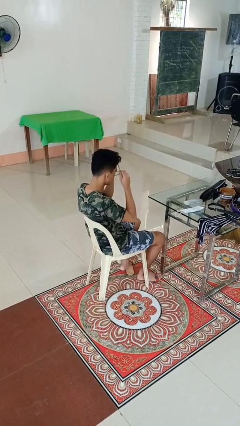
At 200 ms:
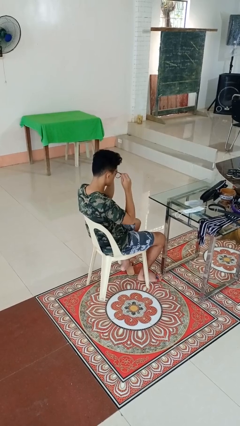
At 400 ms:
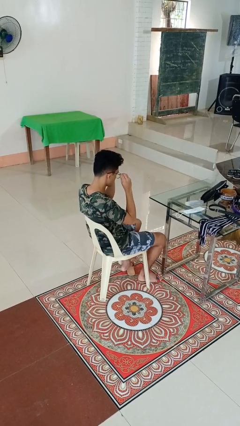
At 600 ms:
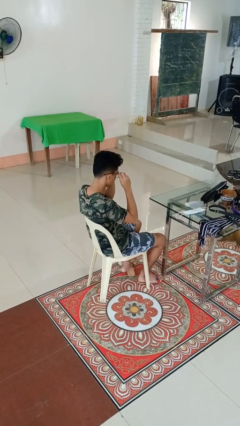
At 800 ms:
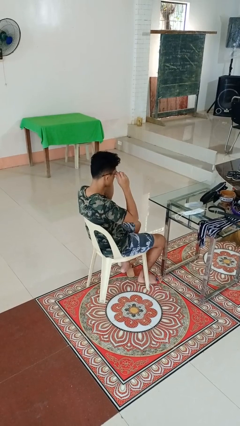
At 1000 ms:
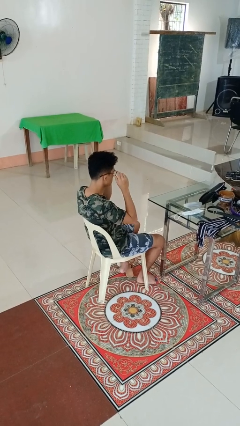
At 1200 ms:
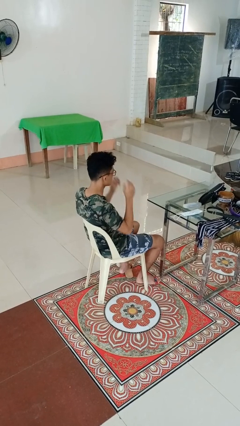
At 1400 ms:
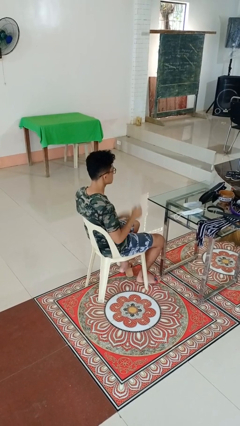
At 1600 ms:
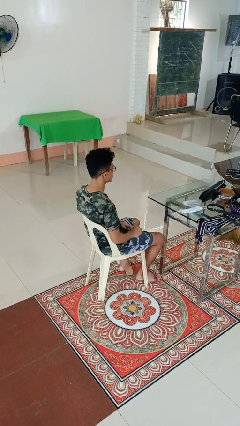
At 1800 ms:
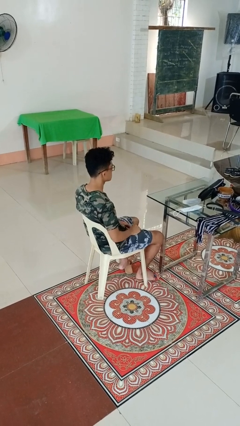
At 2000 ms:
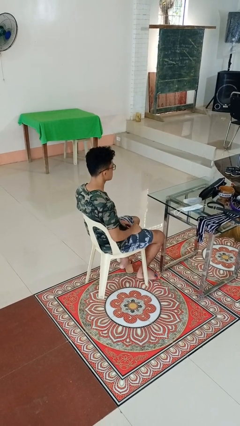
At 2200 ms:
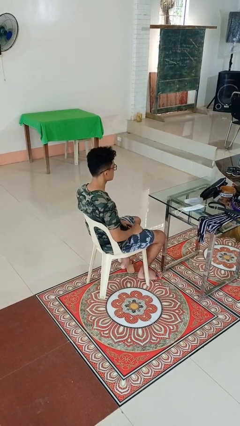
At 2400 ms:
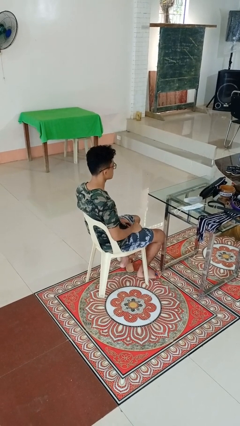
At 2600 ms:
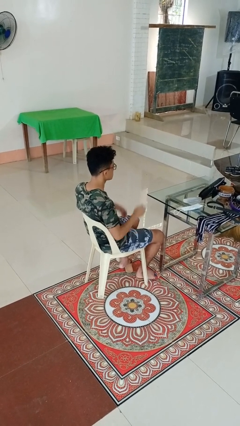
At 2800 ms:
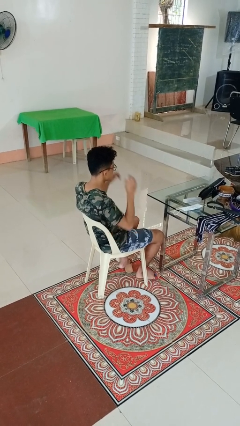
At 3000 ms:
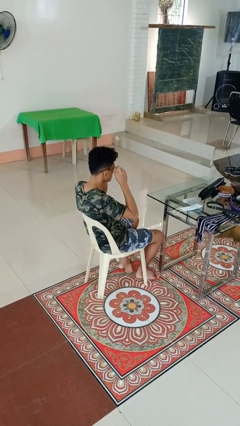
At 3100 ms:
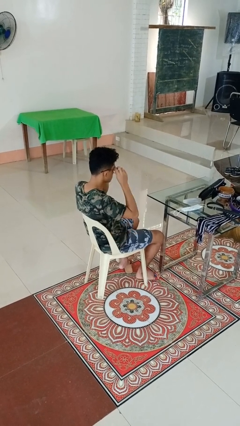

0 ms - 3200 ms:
person puts on glasses

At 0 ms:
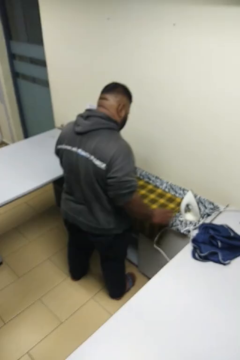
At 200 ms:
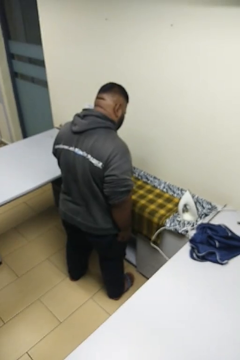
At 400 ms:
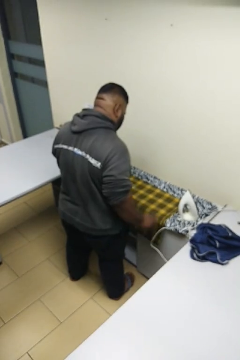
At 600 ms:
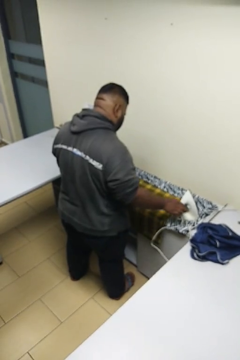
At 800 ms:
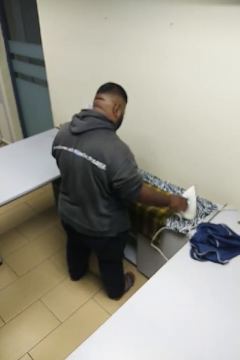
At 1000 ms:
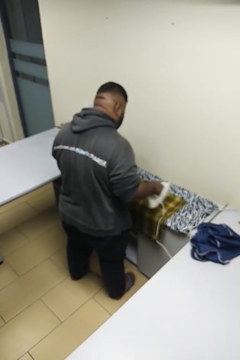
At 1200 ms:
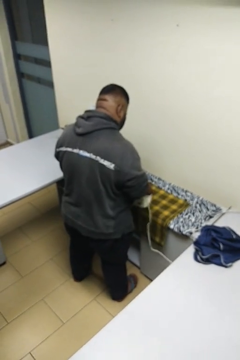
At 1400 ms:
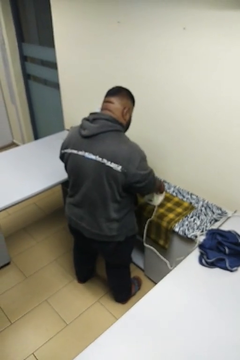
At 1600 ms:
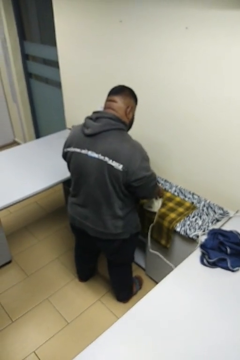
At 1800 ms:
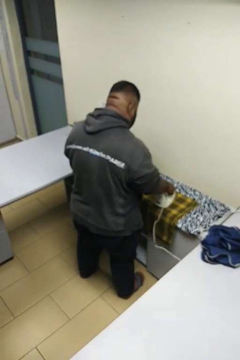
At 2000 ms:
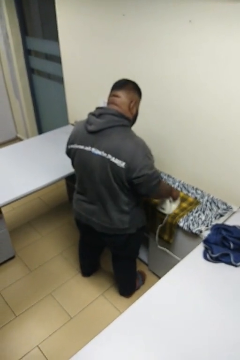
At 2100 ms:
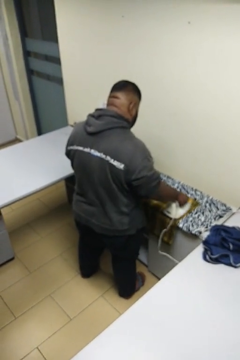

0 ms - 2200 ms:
person irons clothes

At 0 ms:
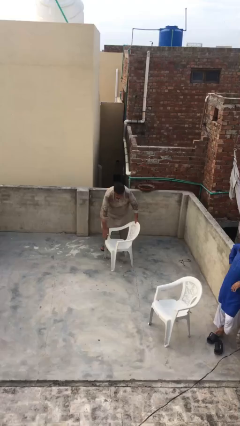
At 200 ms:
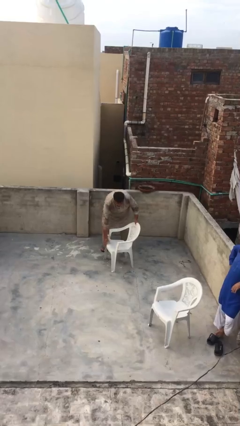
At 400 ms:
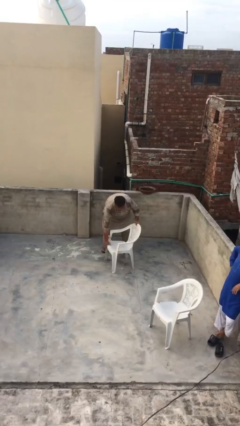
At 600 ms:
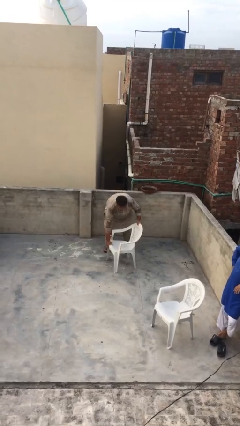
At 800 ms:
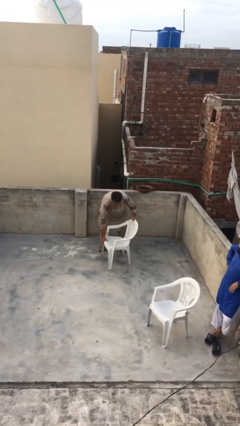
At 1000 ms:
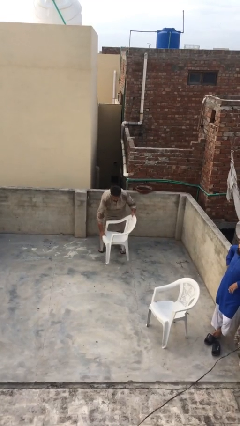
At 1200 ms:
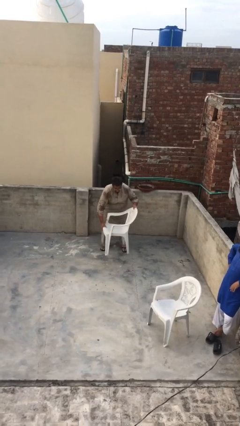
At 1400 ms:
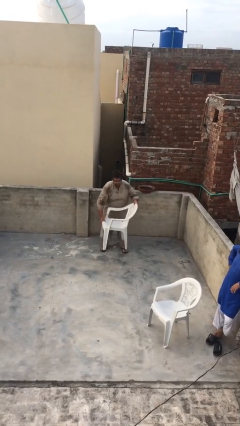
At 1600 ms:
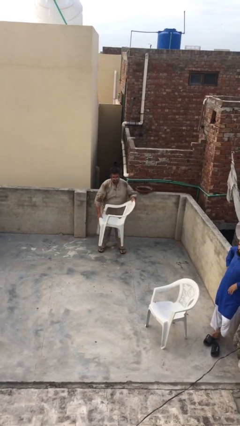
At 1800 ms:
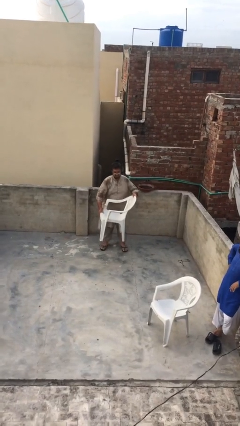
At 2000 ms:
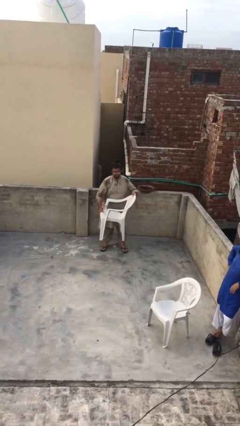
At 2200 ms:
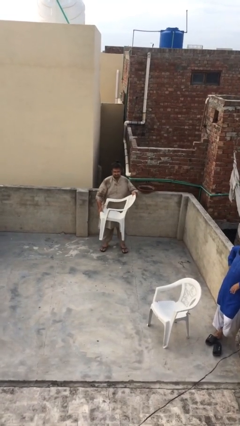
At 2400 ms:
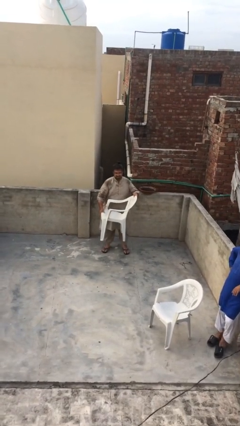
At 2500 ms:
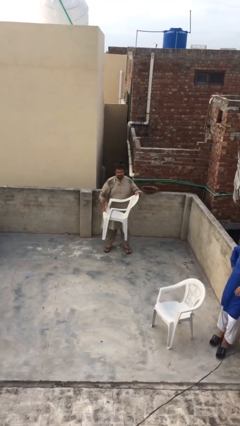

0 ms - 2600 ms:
person picks up object from floor

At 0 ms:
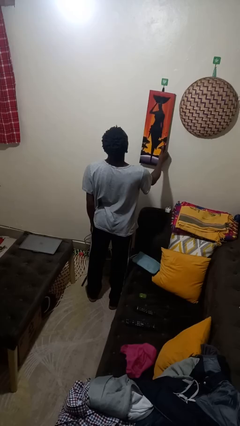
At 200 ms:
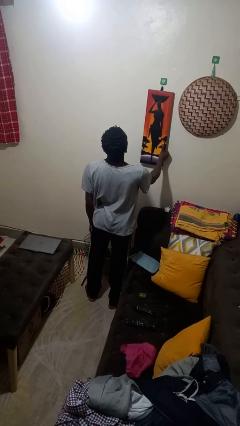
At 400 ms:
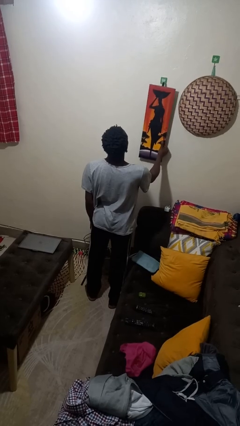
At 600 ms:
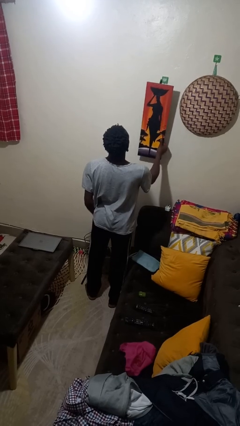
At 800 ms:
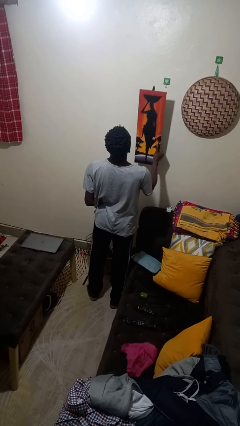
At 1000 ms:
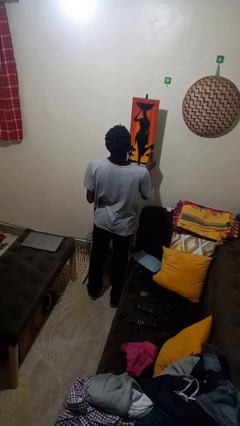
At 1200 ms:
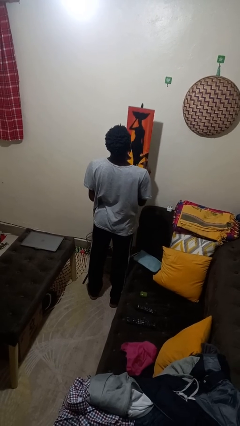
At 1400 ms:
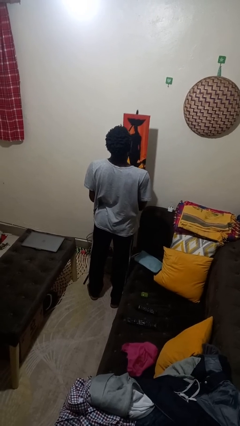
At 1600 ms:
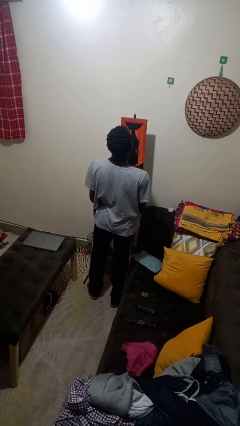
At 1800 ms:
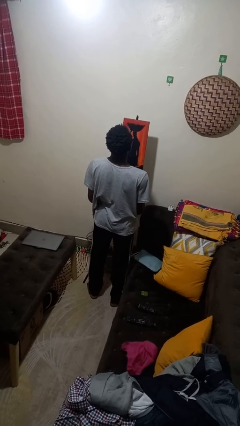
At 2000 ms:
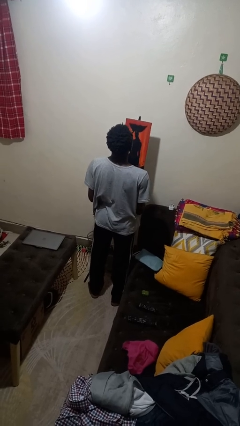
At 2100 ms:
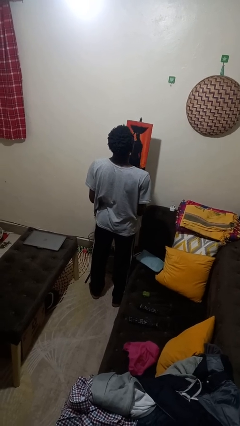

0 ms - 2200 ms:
person takes down picture frame

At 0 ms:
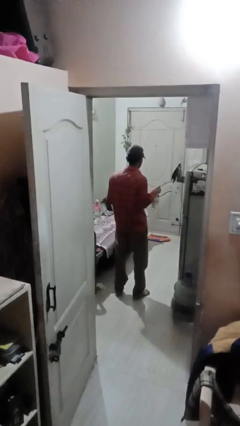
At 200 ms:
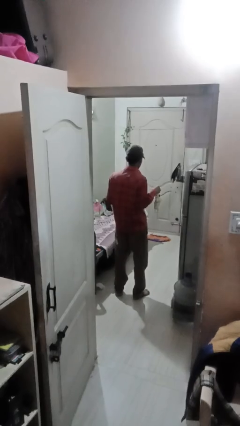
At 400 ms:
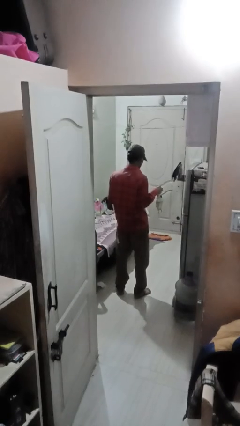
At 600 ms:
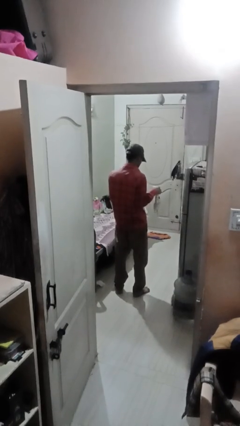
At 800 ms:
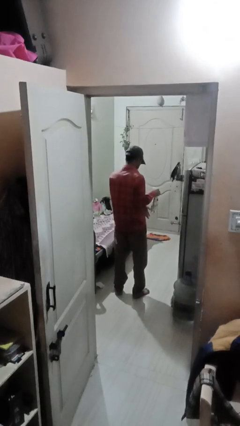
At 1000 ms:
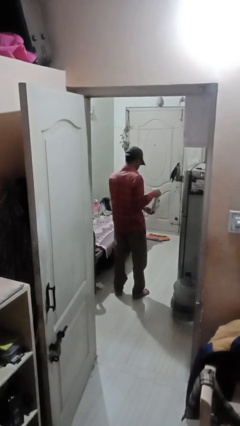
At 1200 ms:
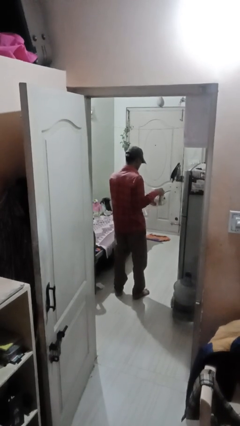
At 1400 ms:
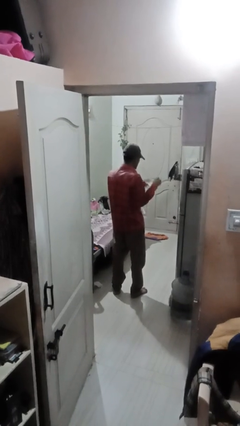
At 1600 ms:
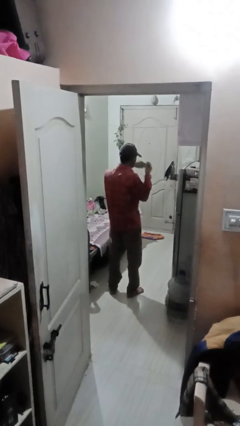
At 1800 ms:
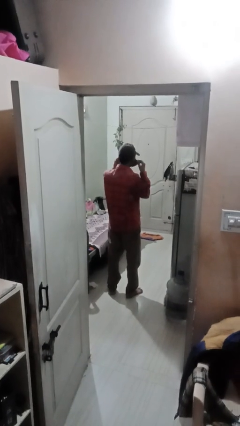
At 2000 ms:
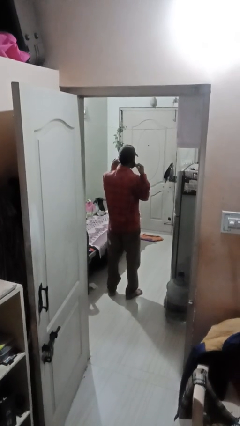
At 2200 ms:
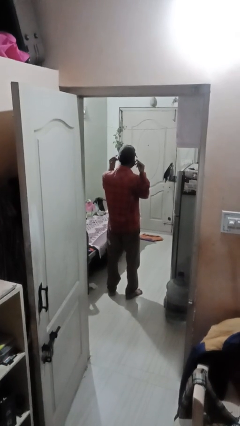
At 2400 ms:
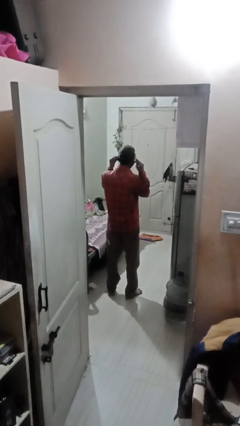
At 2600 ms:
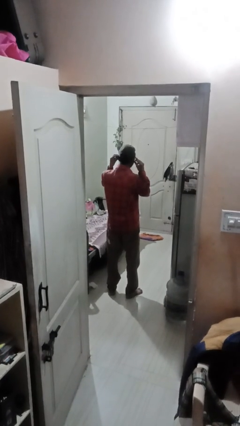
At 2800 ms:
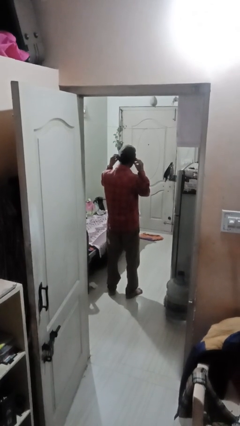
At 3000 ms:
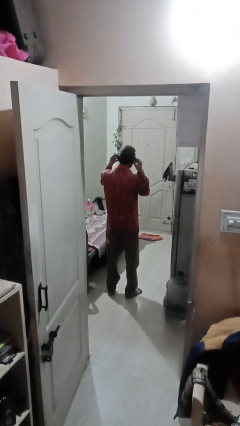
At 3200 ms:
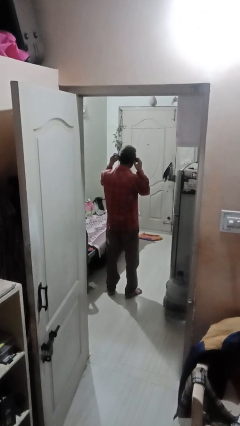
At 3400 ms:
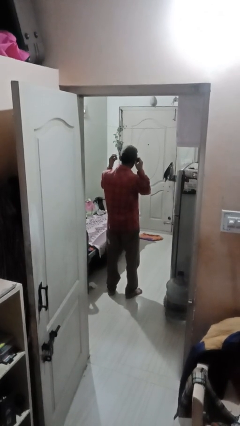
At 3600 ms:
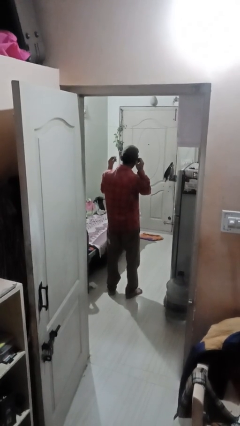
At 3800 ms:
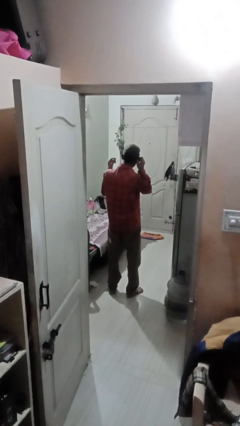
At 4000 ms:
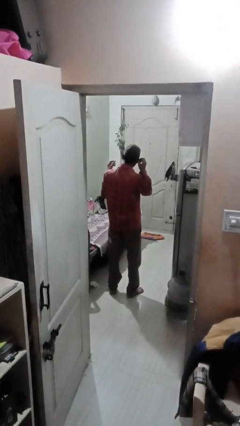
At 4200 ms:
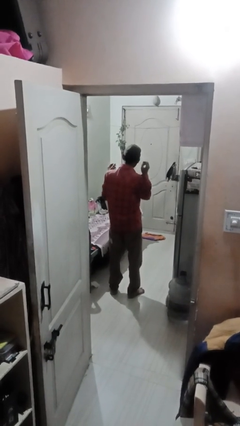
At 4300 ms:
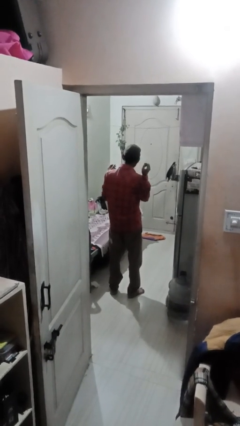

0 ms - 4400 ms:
person puts on facemask

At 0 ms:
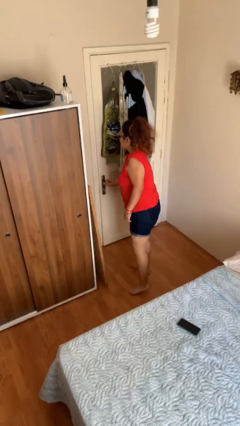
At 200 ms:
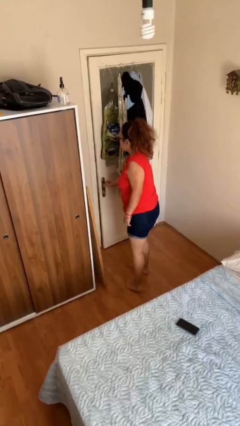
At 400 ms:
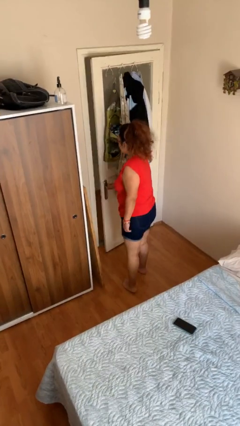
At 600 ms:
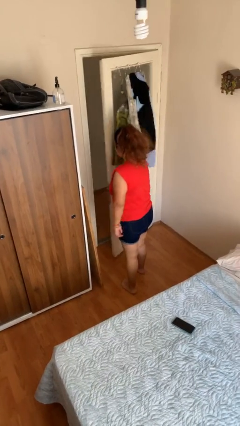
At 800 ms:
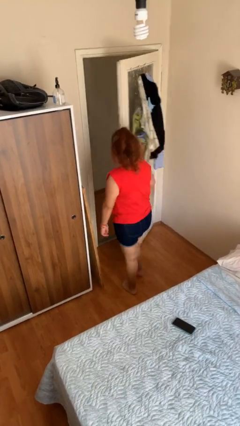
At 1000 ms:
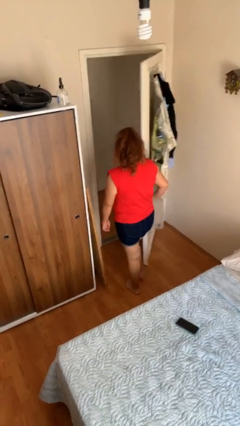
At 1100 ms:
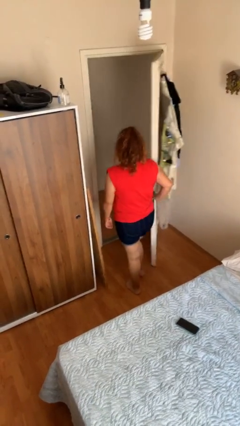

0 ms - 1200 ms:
person opens facility door

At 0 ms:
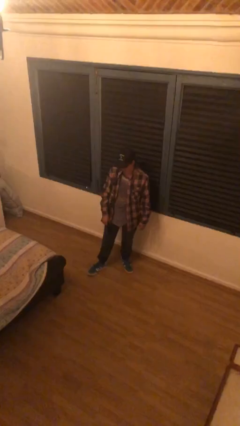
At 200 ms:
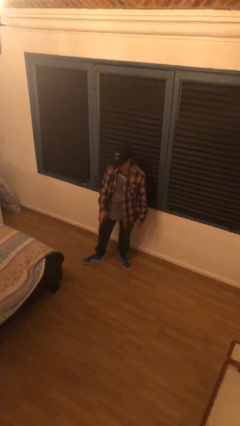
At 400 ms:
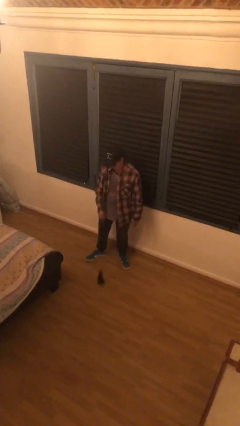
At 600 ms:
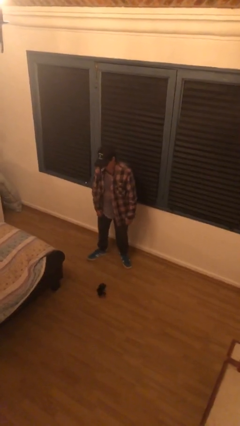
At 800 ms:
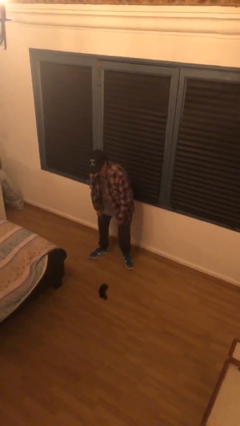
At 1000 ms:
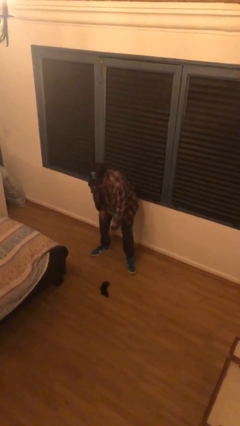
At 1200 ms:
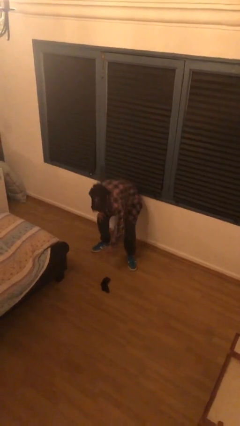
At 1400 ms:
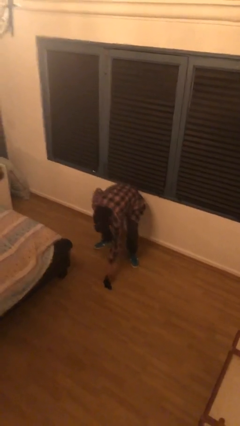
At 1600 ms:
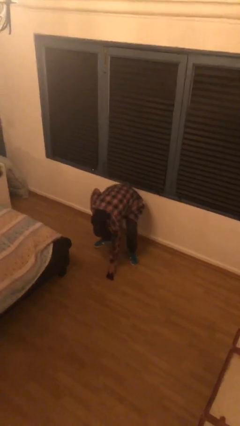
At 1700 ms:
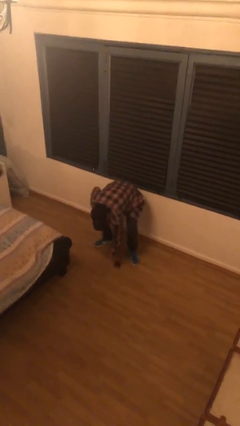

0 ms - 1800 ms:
person drops object
